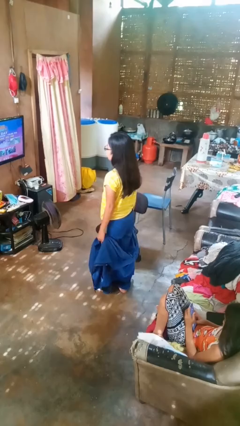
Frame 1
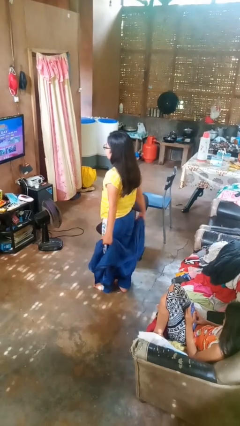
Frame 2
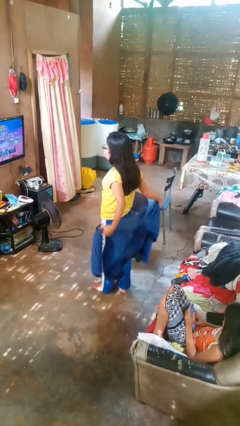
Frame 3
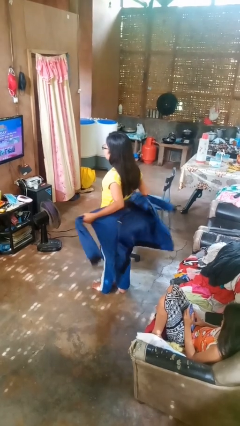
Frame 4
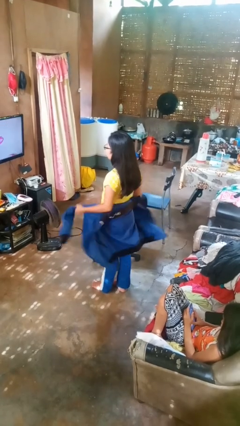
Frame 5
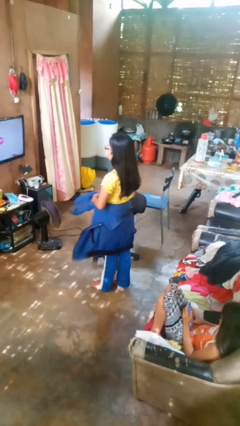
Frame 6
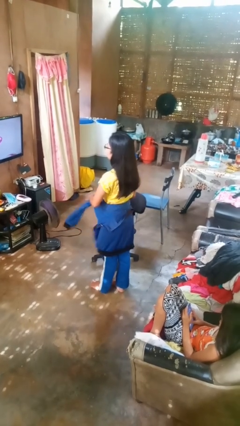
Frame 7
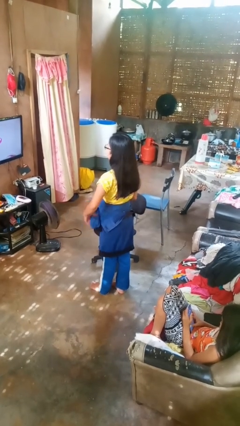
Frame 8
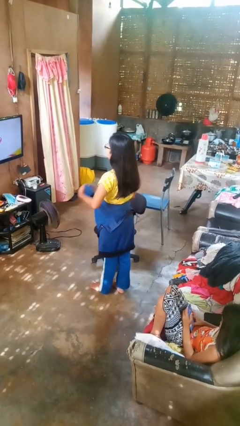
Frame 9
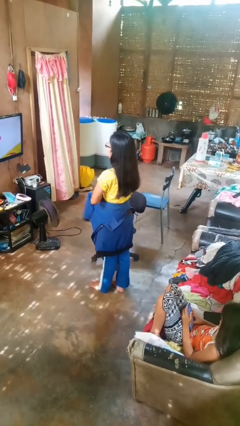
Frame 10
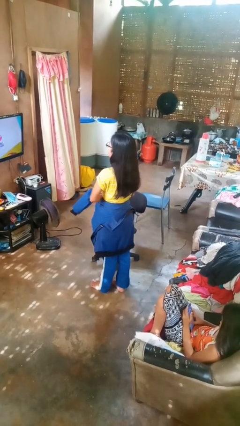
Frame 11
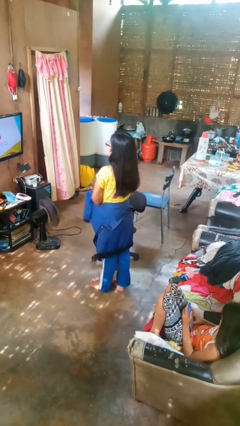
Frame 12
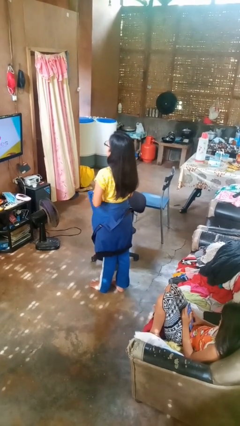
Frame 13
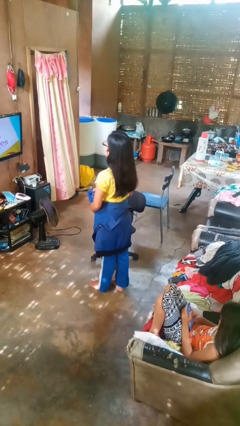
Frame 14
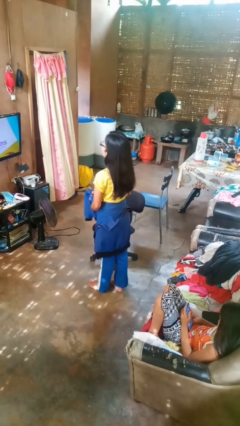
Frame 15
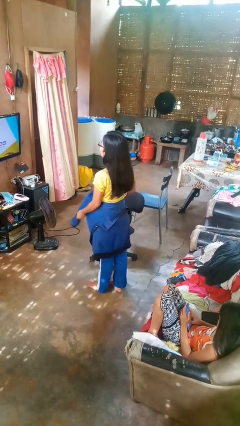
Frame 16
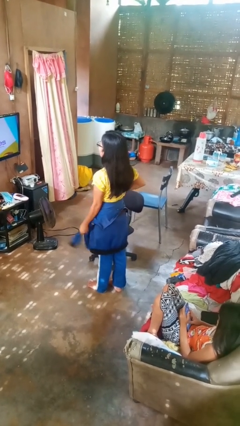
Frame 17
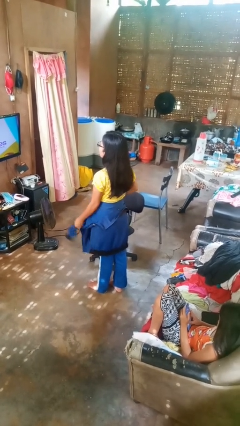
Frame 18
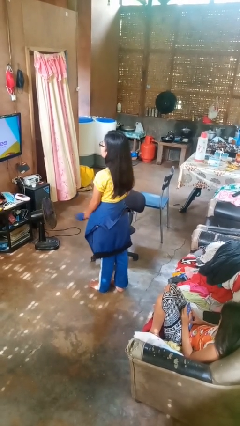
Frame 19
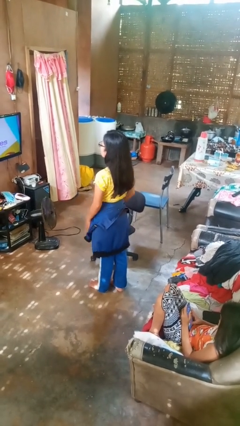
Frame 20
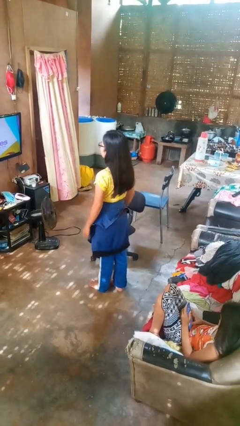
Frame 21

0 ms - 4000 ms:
person ties jacket around waist

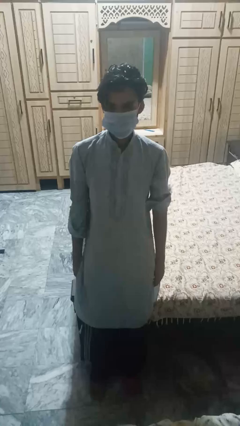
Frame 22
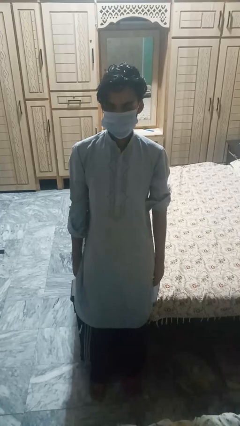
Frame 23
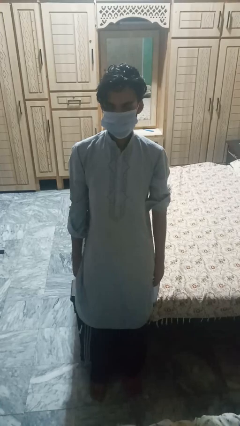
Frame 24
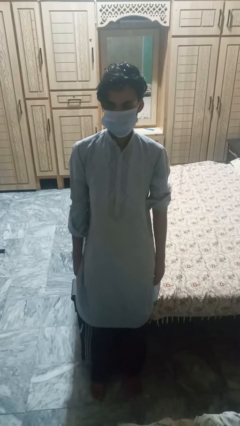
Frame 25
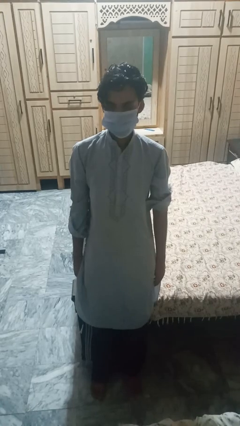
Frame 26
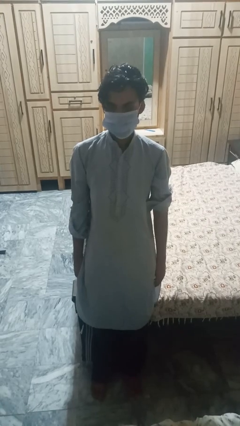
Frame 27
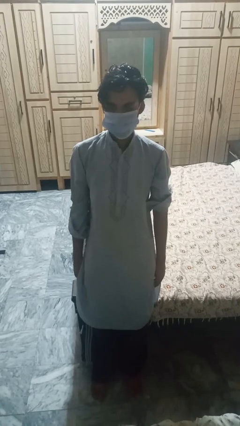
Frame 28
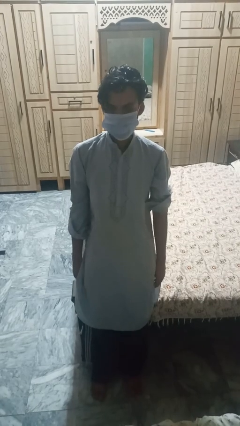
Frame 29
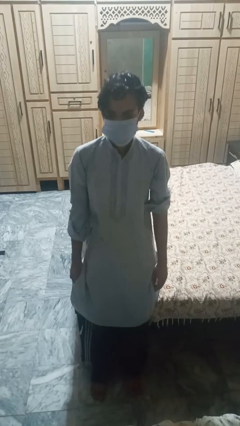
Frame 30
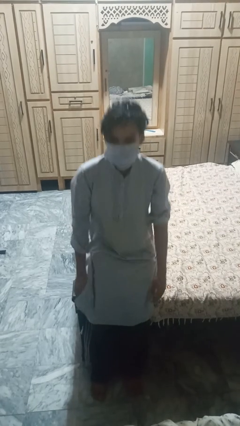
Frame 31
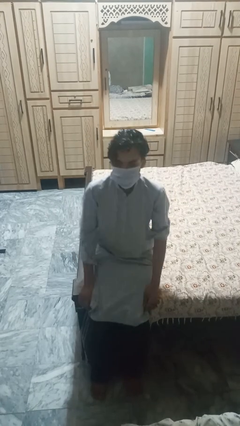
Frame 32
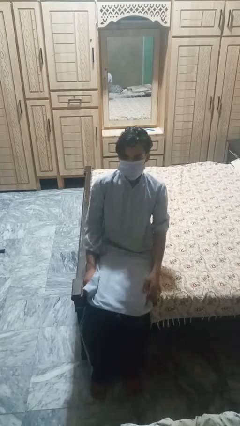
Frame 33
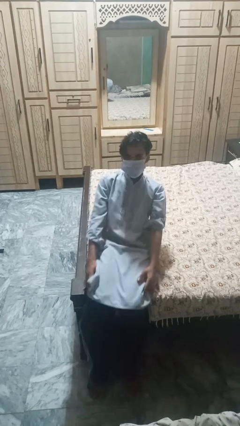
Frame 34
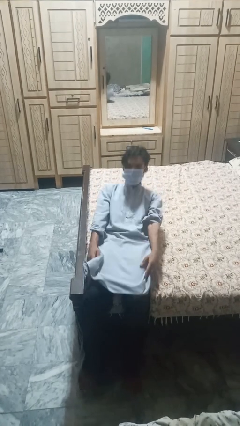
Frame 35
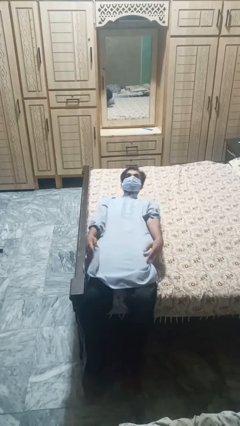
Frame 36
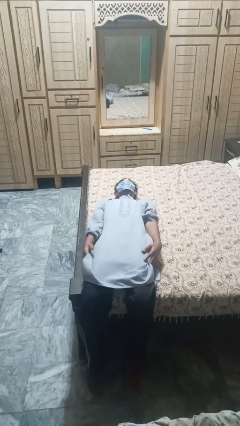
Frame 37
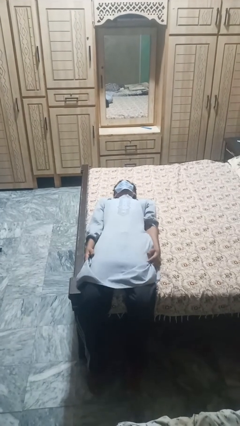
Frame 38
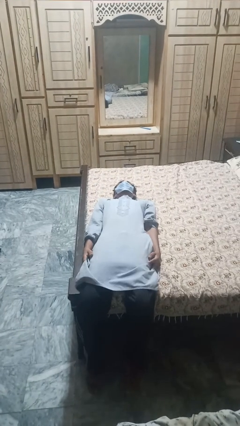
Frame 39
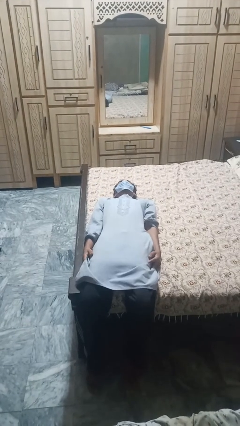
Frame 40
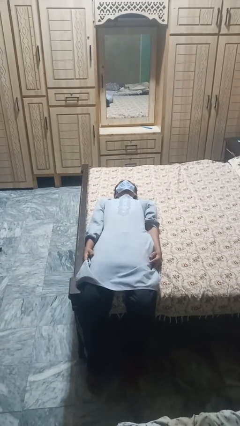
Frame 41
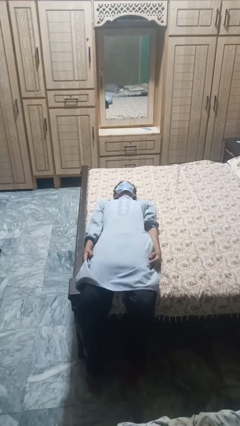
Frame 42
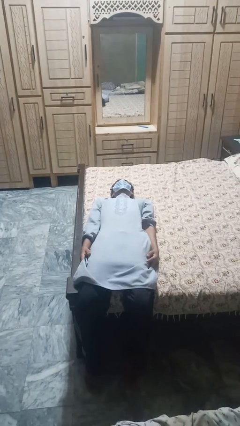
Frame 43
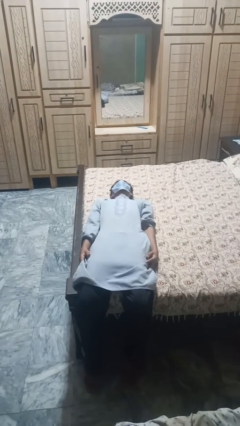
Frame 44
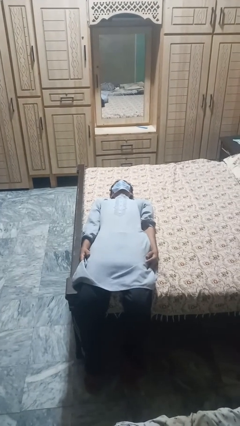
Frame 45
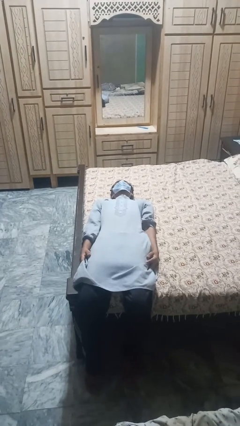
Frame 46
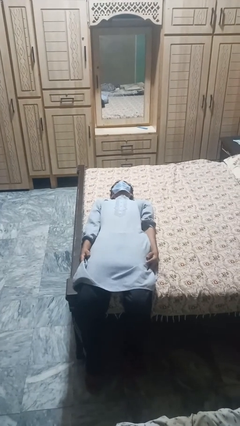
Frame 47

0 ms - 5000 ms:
person lies down on bed

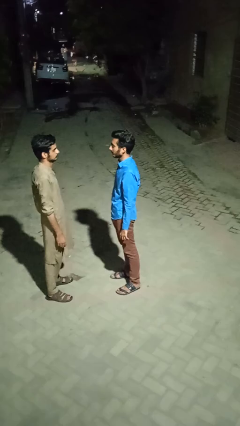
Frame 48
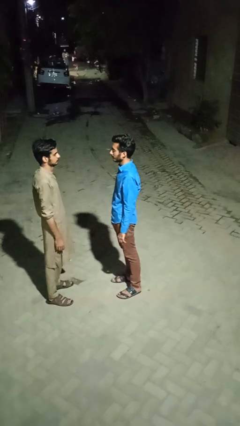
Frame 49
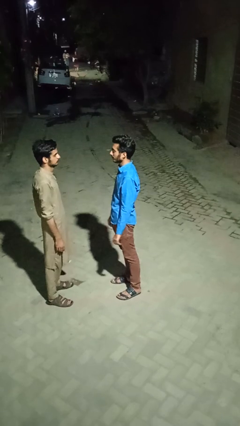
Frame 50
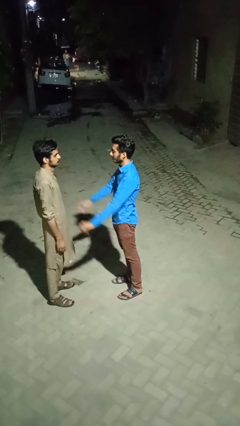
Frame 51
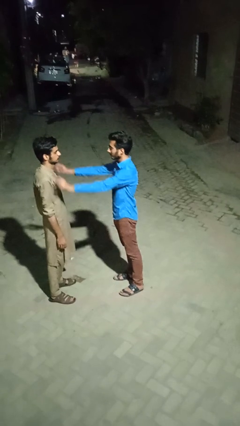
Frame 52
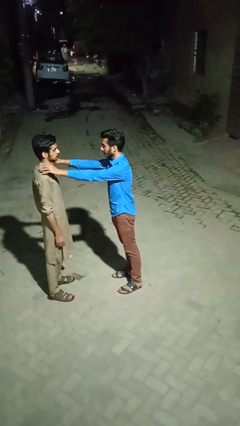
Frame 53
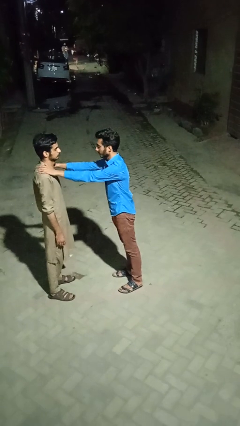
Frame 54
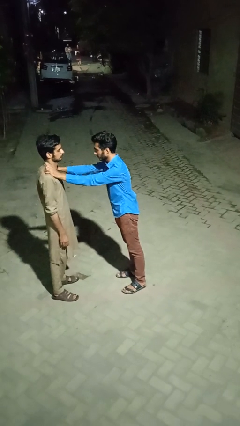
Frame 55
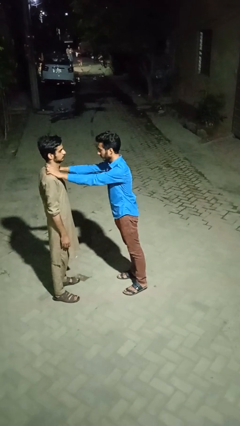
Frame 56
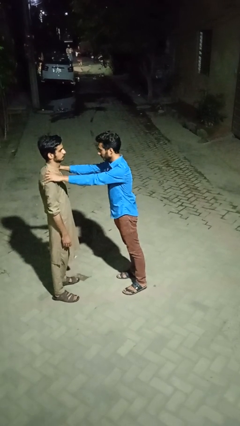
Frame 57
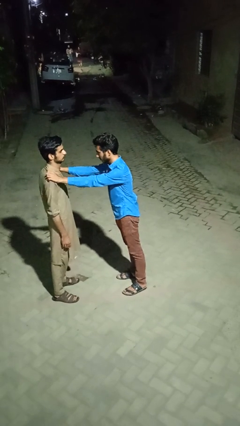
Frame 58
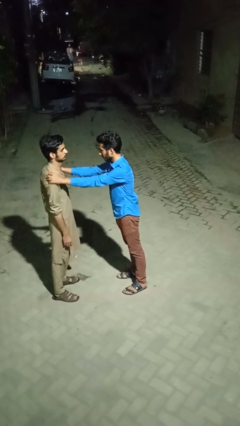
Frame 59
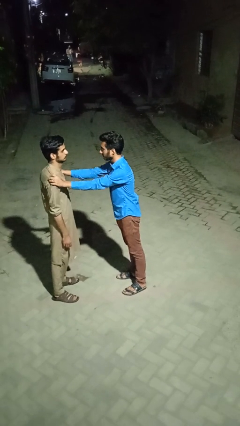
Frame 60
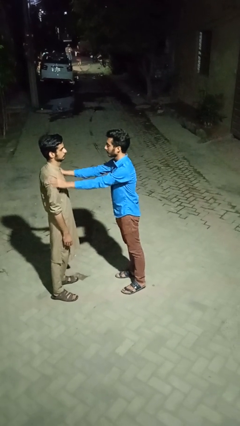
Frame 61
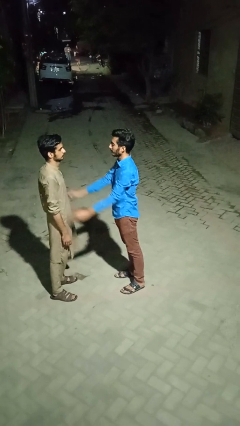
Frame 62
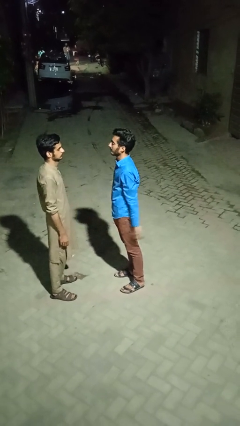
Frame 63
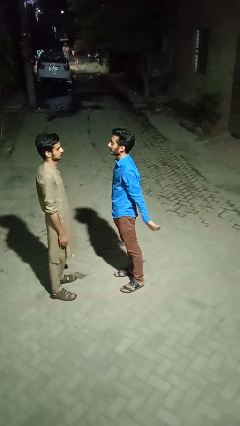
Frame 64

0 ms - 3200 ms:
person pounds shoulders of person

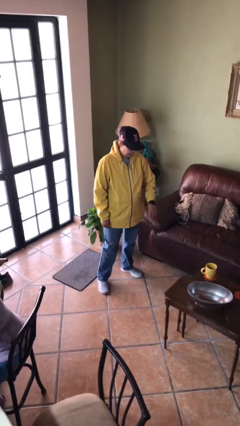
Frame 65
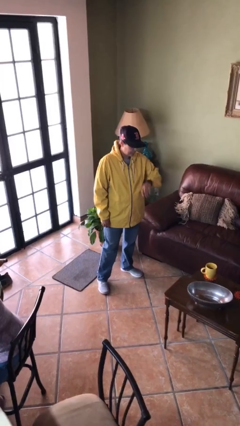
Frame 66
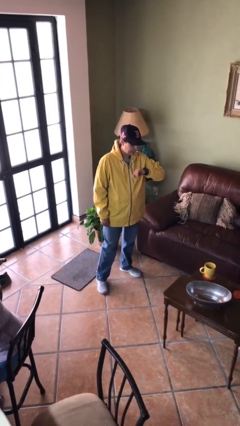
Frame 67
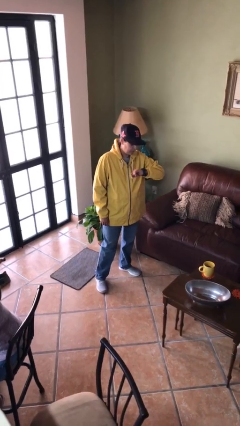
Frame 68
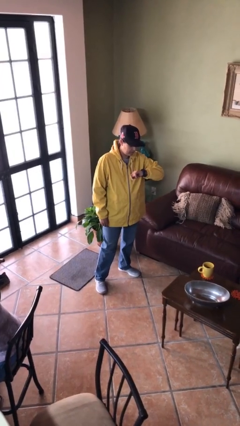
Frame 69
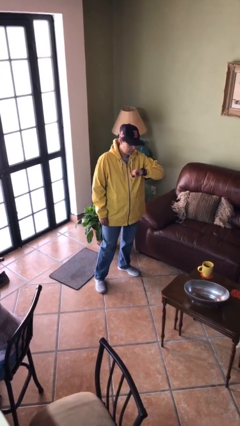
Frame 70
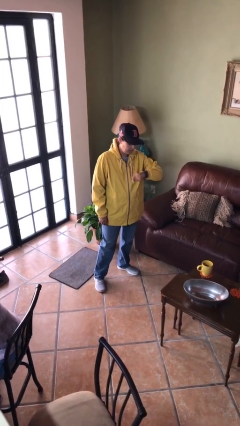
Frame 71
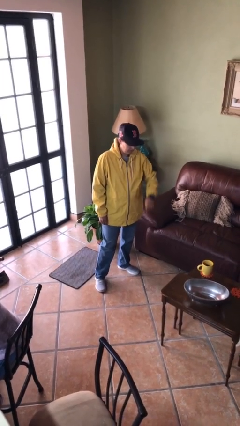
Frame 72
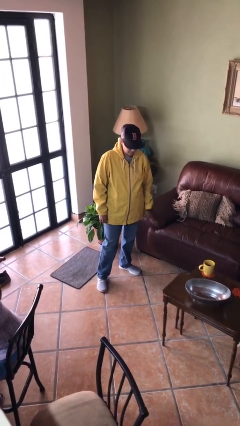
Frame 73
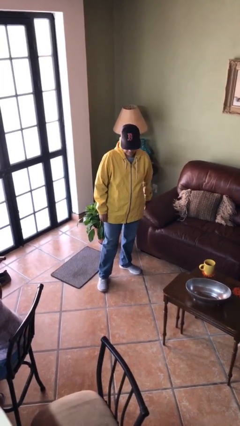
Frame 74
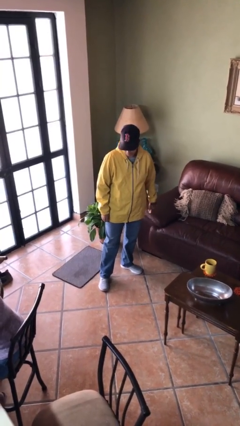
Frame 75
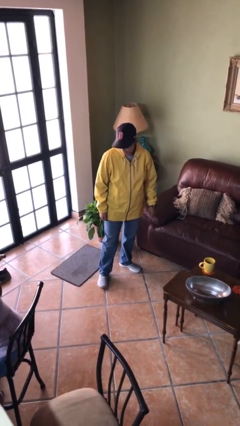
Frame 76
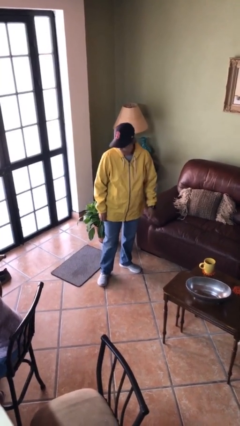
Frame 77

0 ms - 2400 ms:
person looks at wristwatch

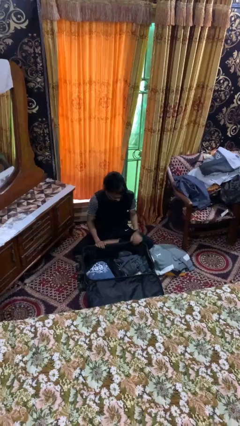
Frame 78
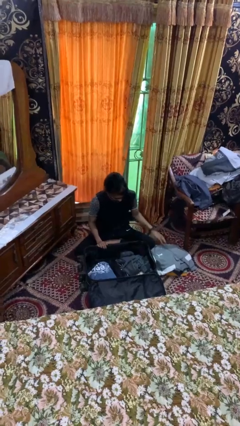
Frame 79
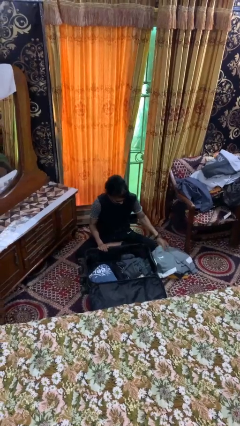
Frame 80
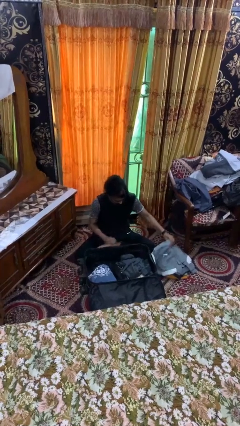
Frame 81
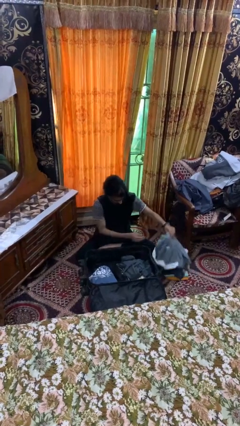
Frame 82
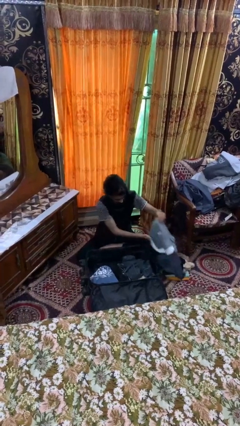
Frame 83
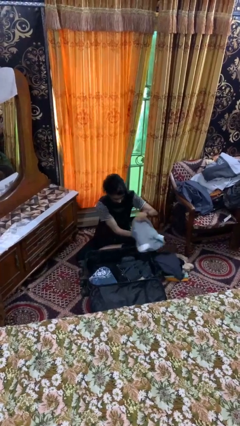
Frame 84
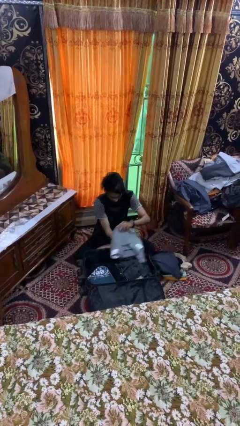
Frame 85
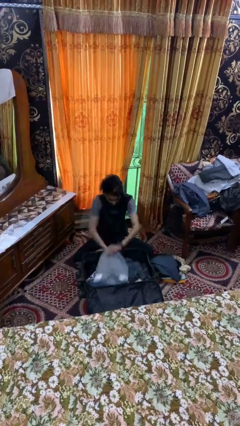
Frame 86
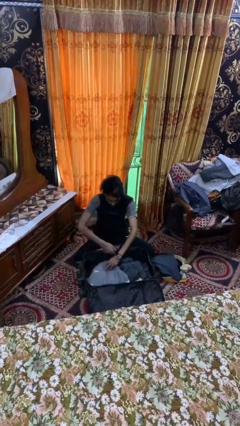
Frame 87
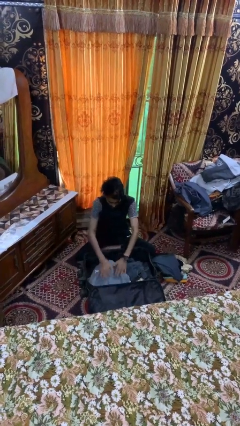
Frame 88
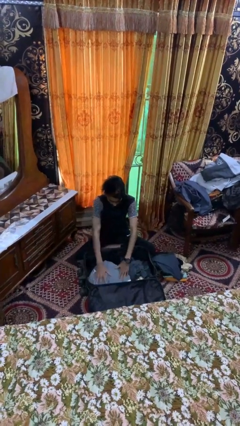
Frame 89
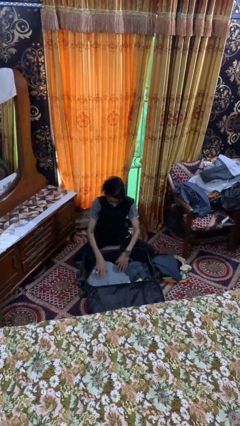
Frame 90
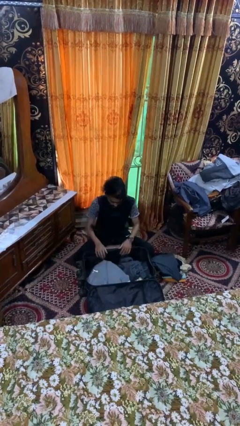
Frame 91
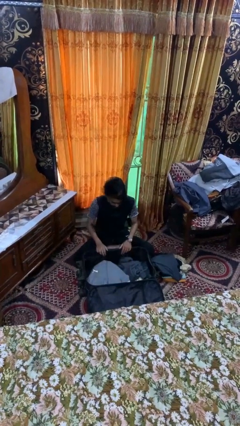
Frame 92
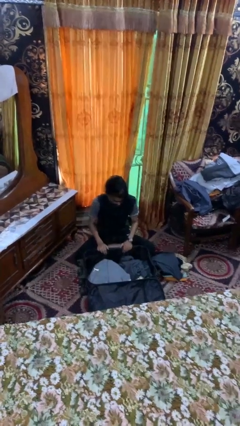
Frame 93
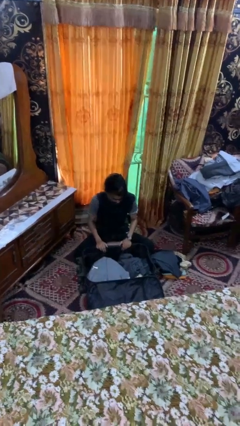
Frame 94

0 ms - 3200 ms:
person loads clothes into suitcase

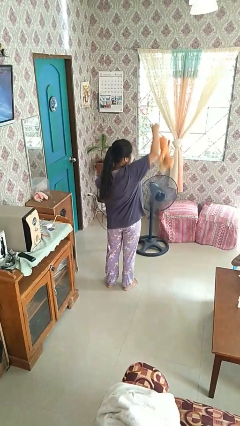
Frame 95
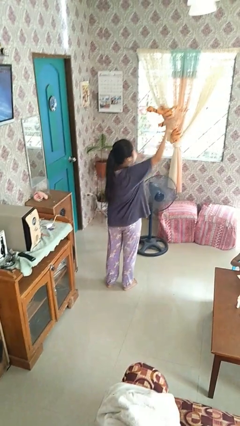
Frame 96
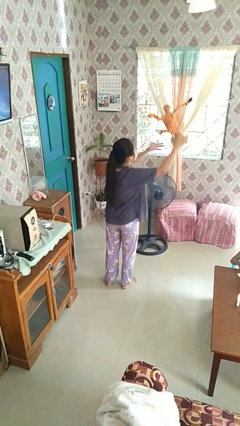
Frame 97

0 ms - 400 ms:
person drops object
